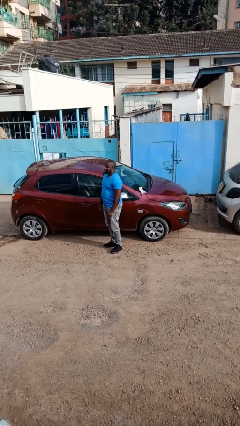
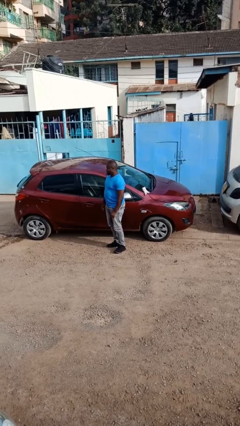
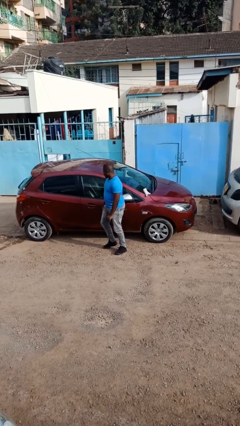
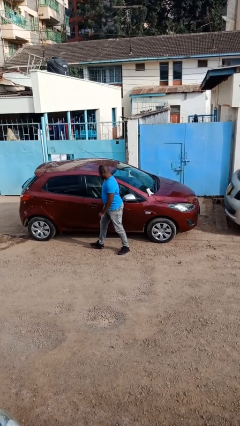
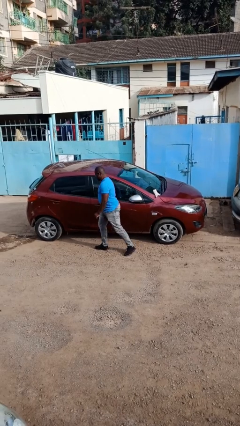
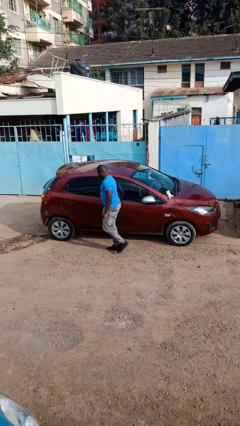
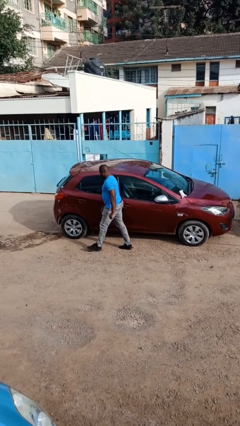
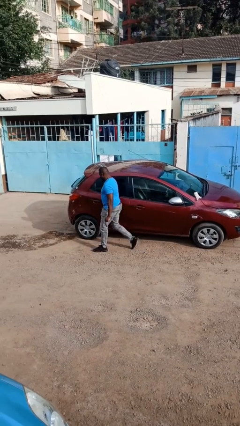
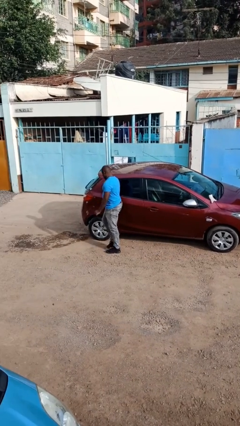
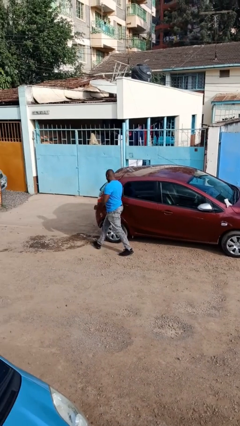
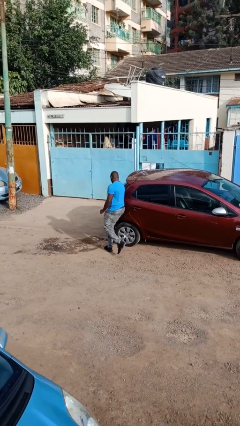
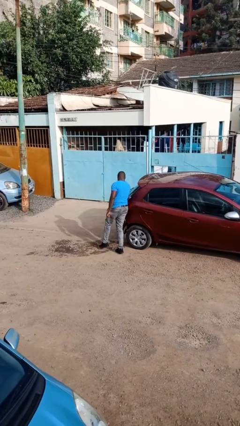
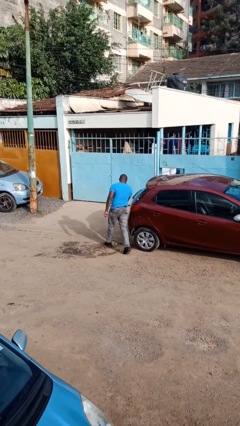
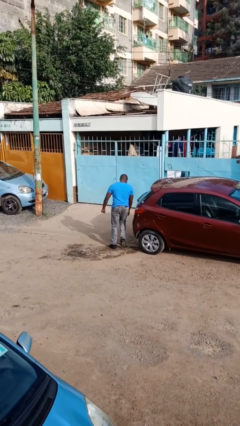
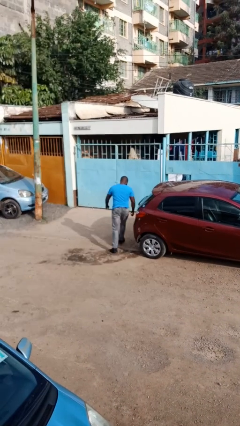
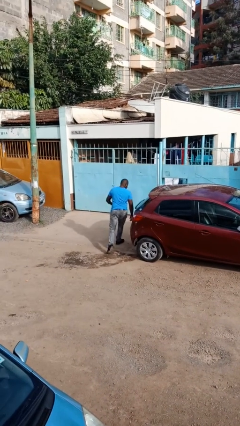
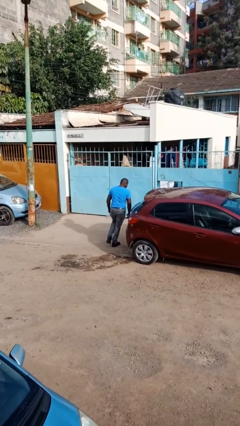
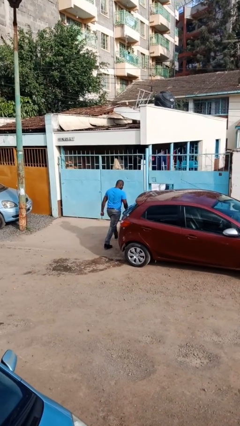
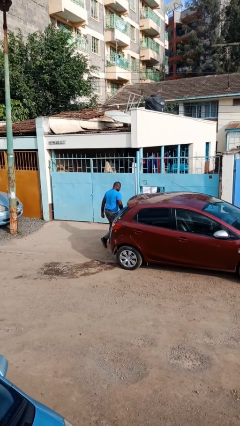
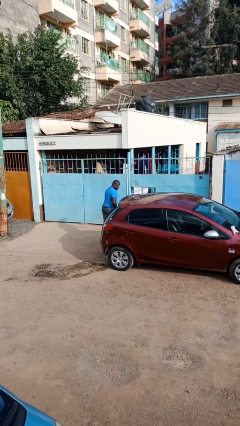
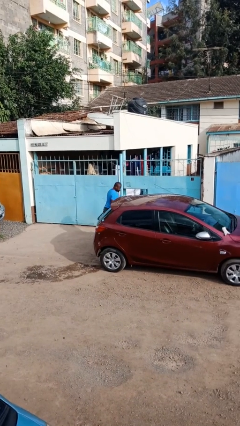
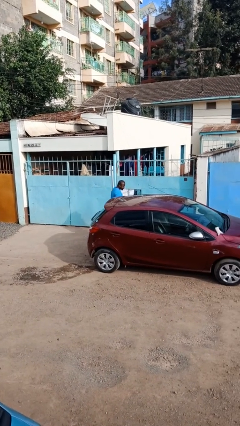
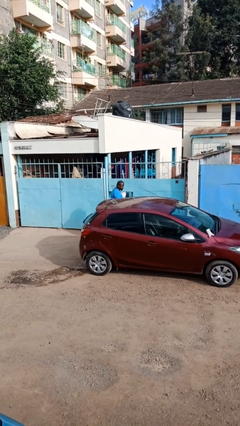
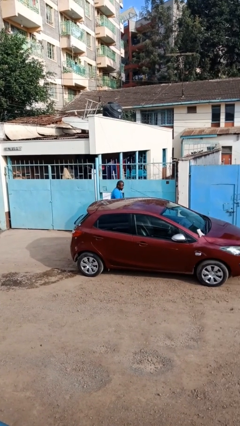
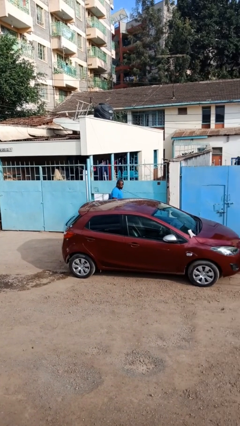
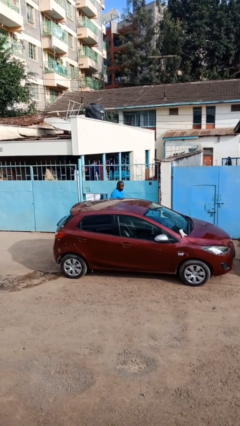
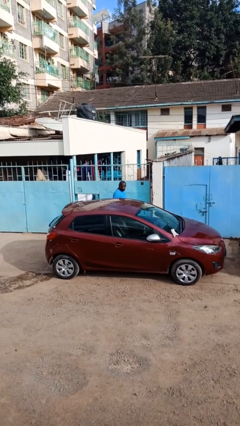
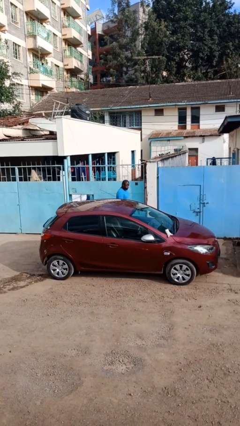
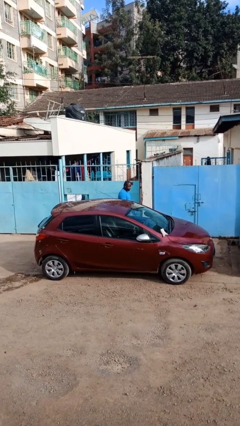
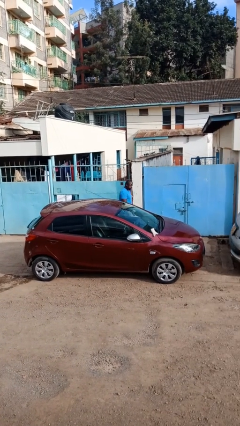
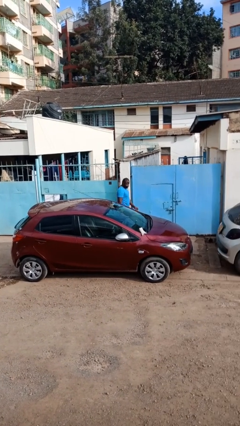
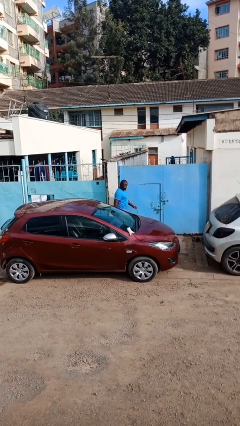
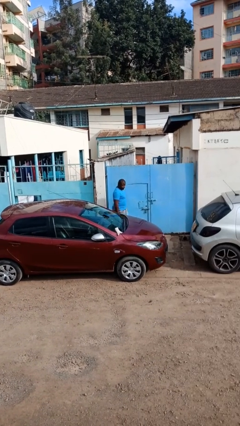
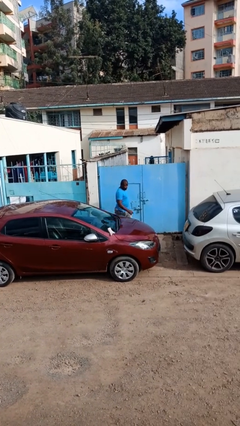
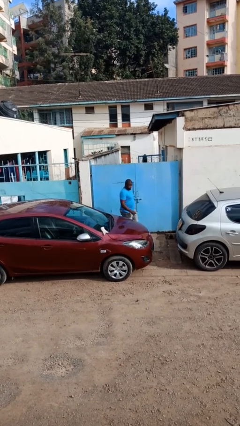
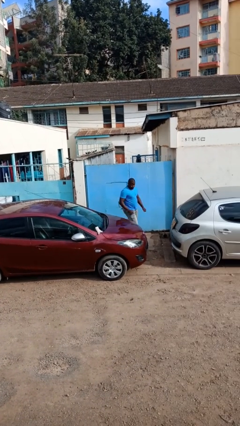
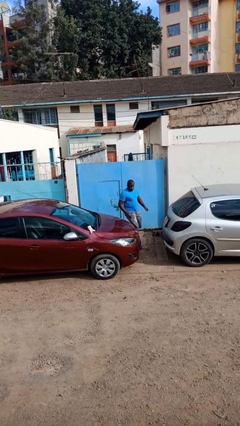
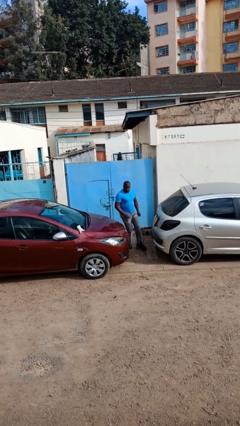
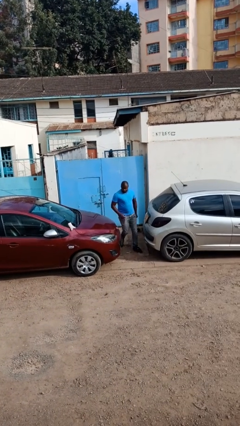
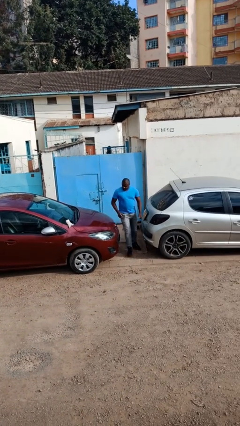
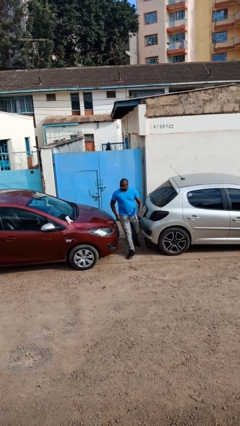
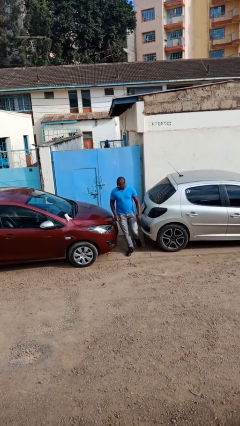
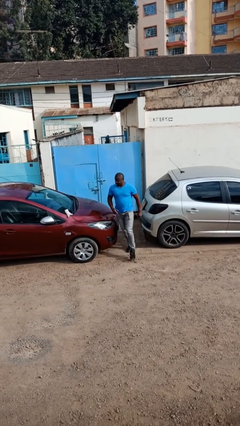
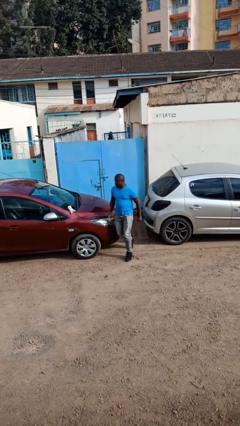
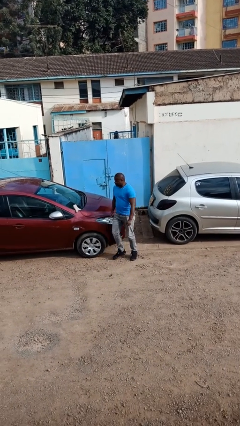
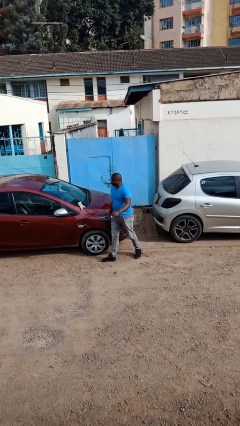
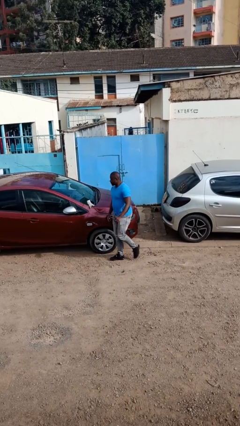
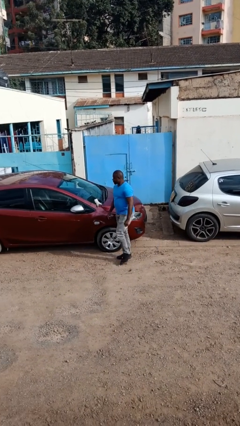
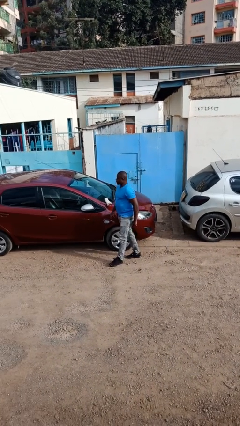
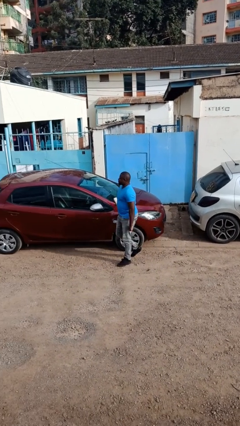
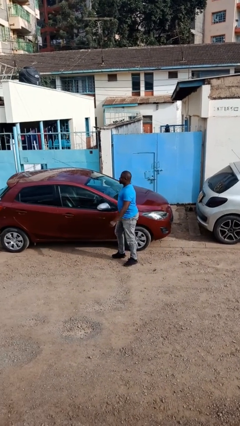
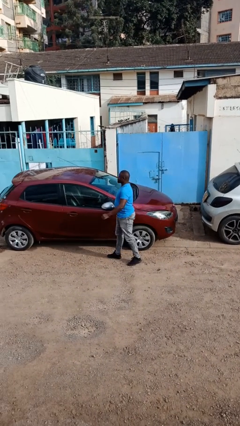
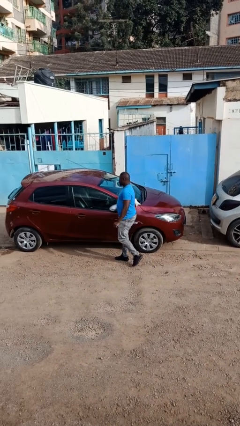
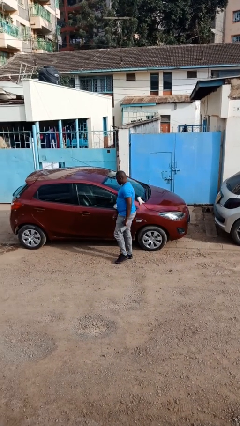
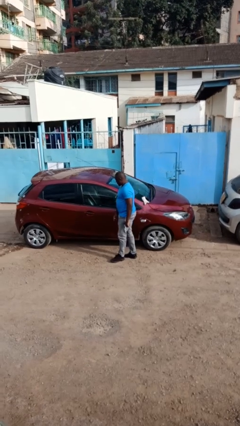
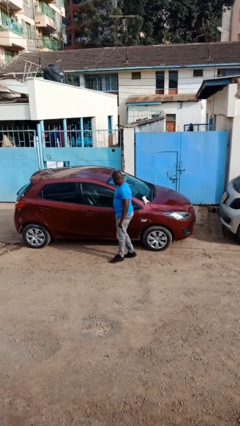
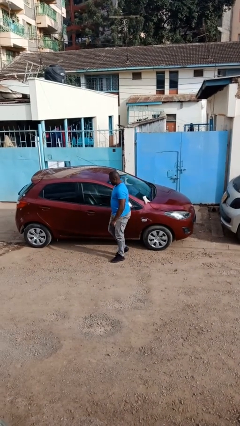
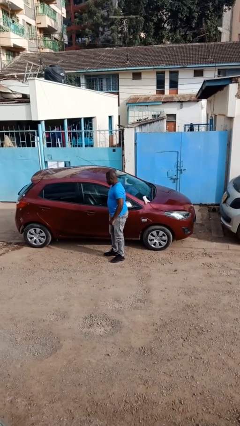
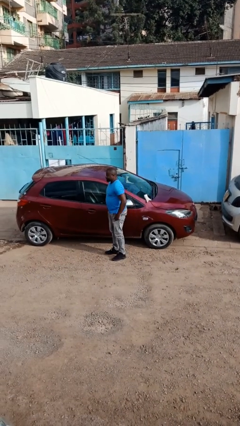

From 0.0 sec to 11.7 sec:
person walks around car

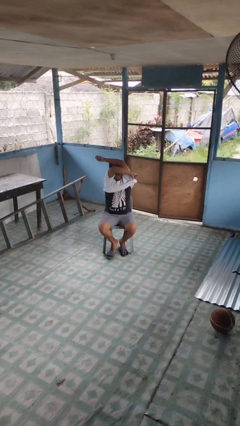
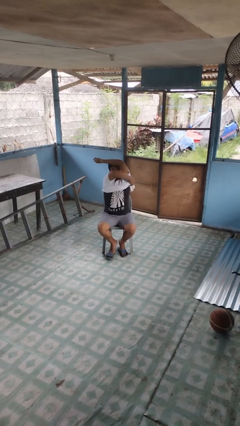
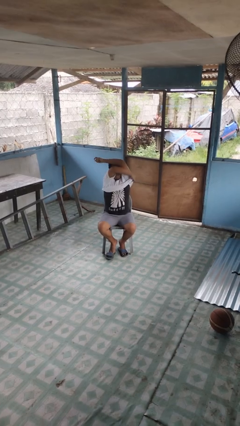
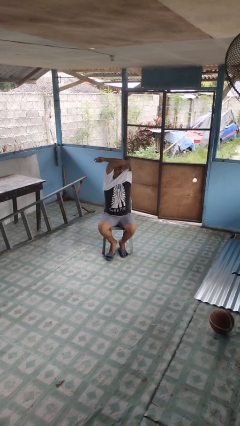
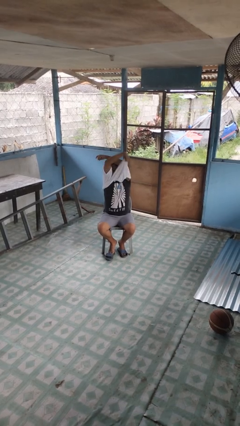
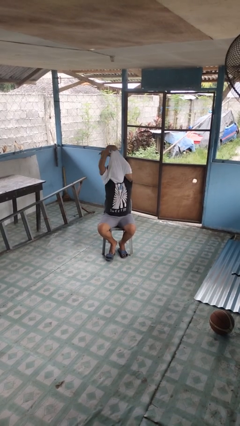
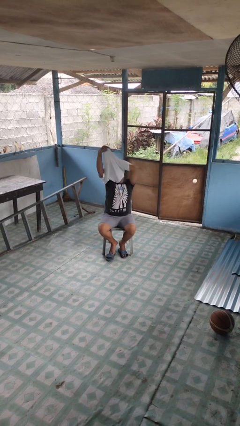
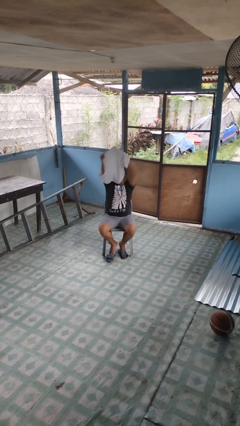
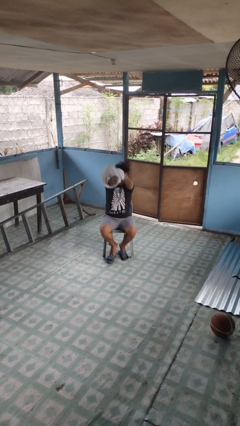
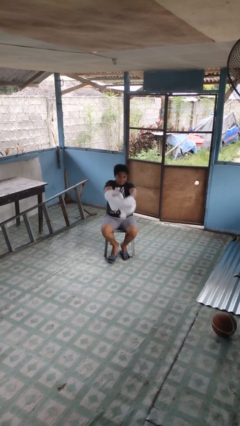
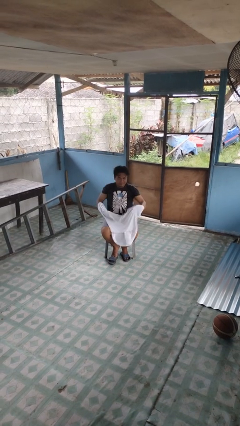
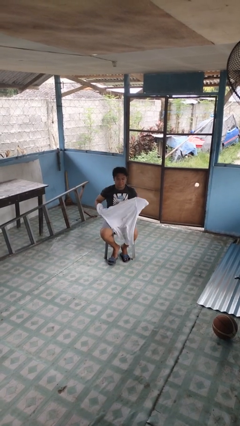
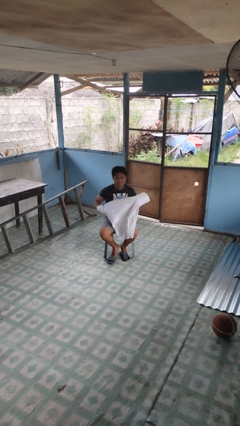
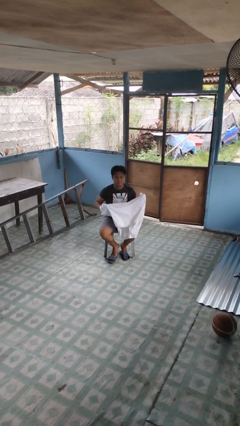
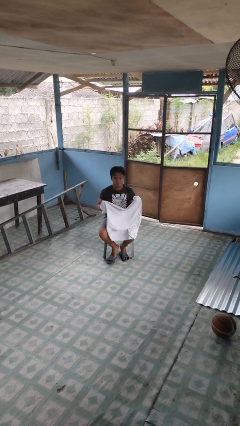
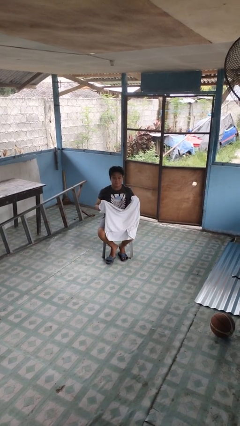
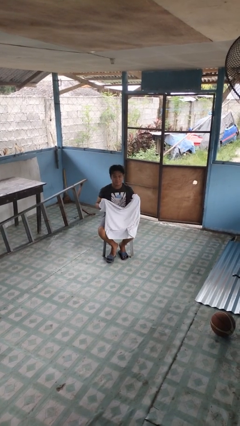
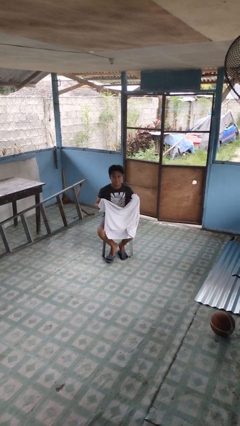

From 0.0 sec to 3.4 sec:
person takes off shirt

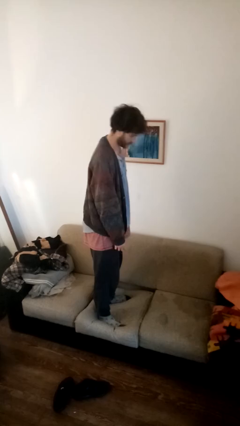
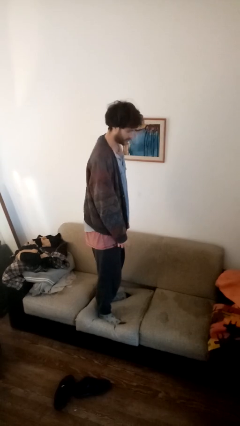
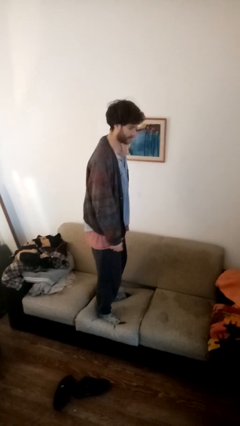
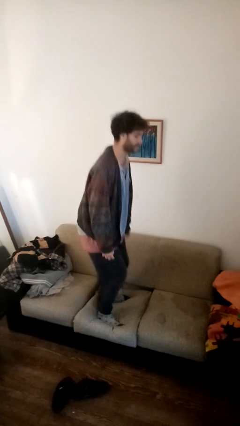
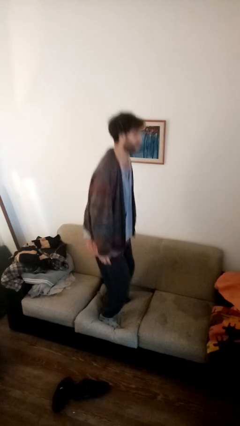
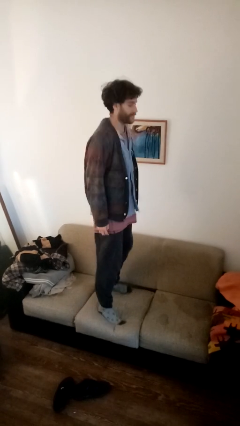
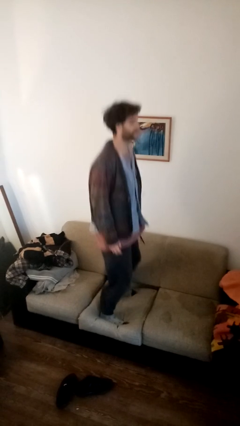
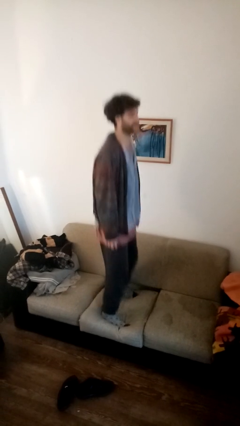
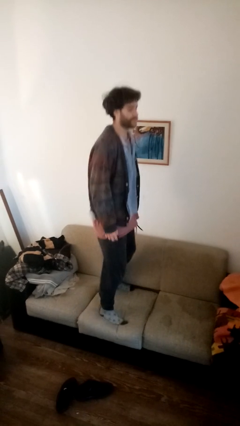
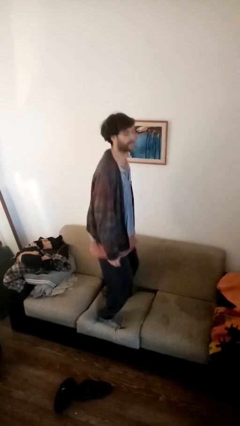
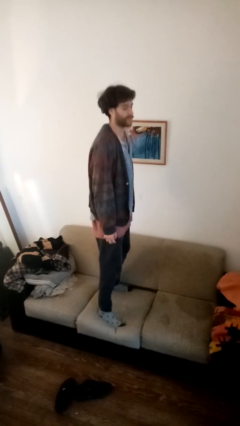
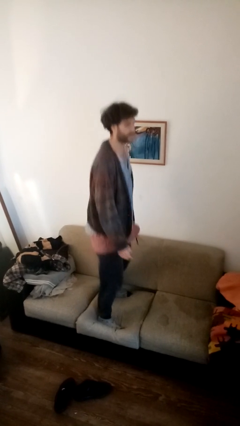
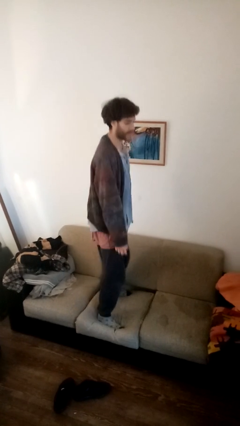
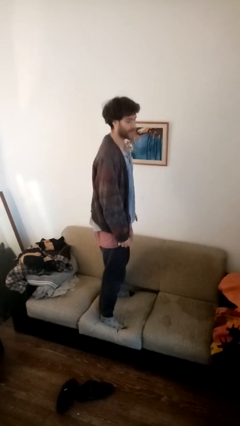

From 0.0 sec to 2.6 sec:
person jumps on couch

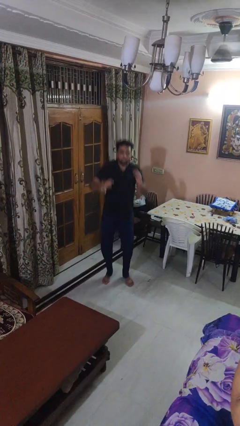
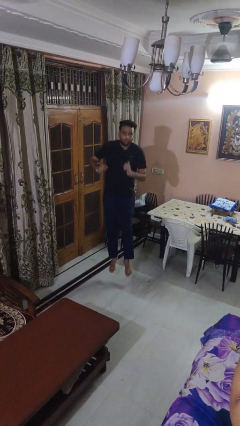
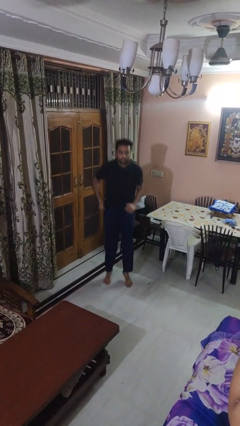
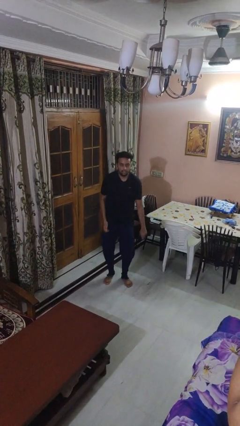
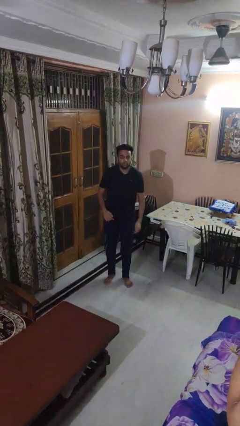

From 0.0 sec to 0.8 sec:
person jumps
